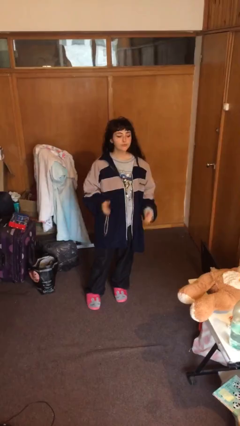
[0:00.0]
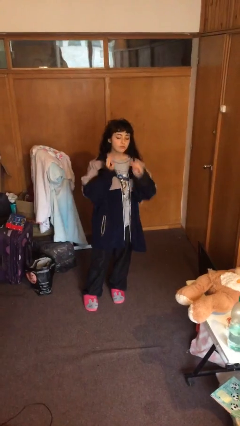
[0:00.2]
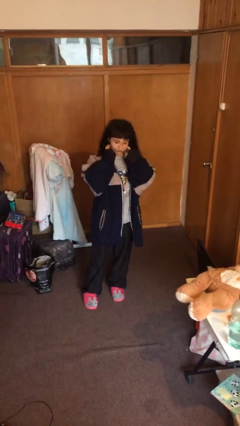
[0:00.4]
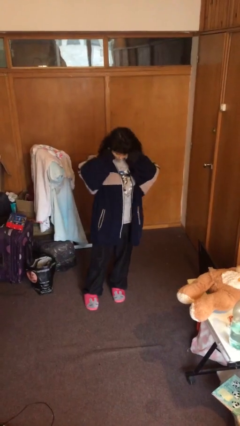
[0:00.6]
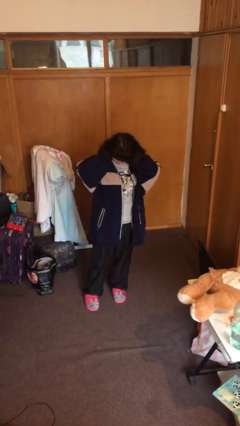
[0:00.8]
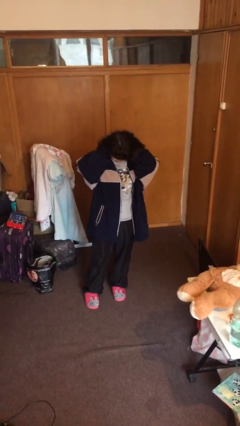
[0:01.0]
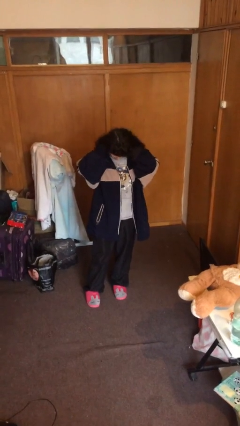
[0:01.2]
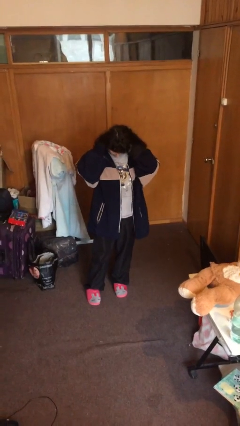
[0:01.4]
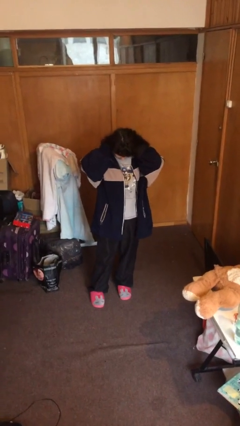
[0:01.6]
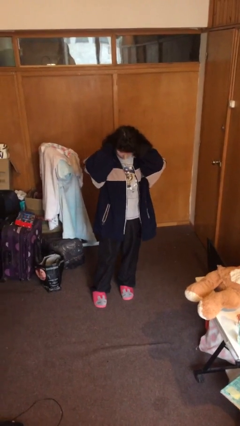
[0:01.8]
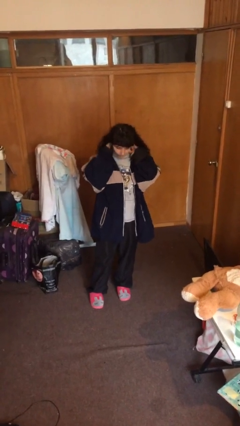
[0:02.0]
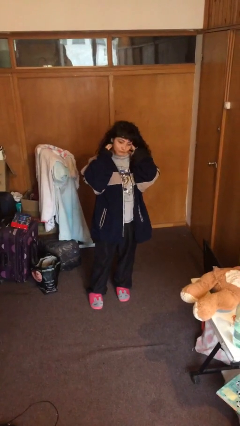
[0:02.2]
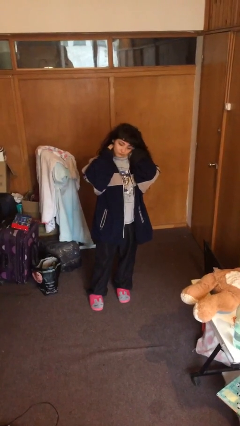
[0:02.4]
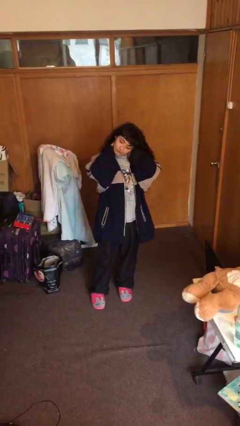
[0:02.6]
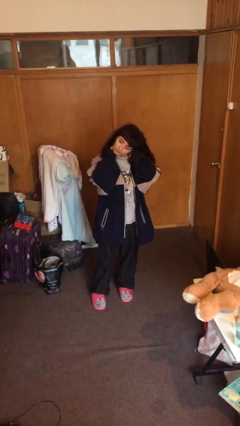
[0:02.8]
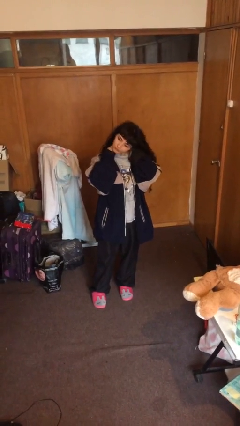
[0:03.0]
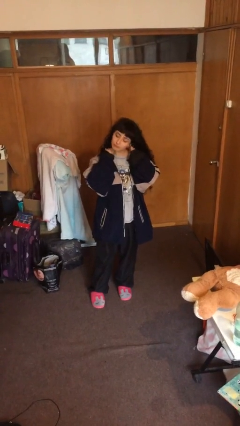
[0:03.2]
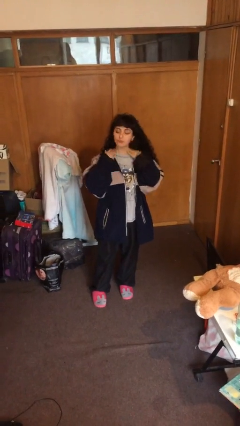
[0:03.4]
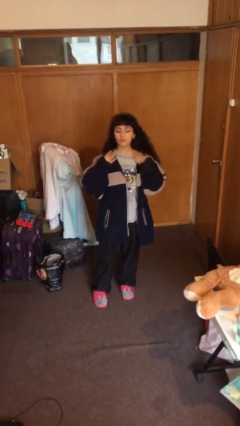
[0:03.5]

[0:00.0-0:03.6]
person rubs neck

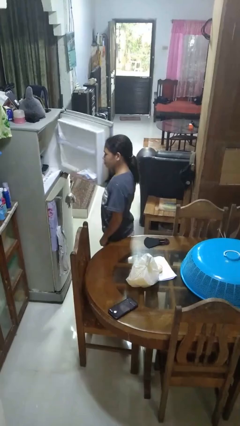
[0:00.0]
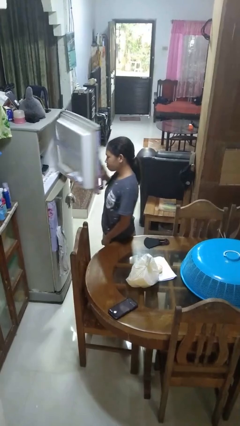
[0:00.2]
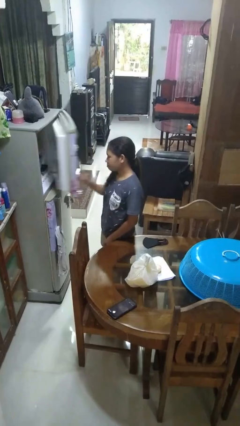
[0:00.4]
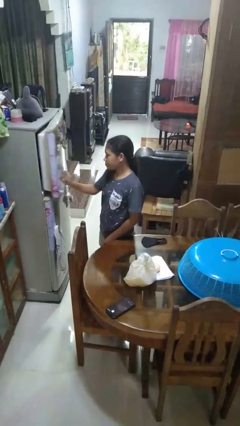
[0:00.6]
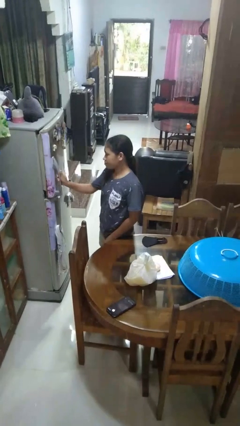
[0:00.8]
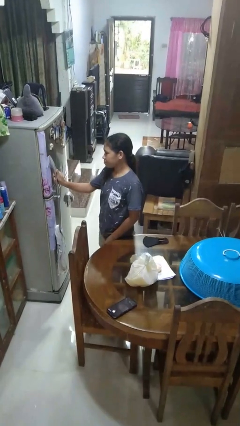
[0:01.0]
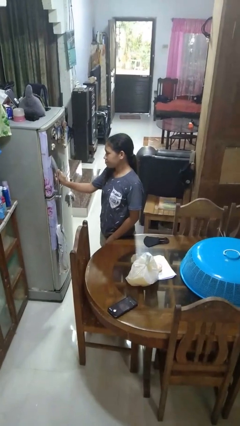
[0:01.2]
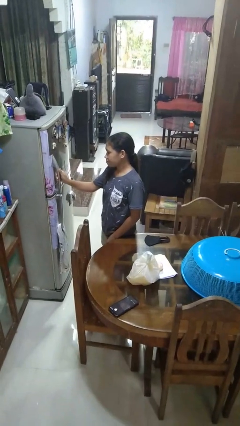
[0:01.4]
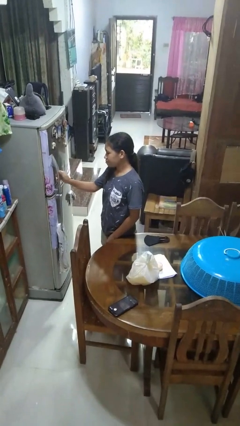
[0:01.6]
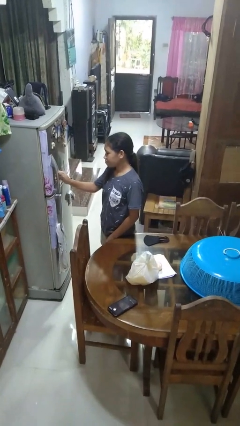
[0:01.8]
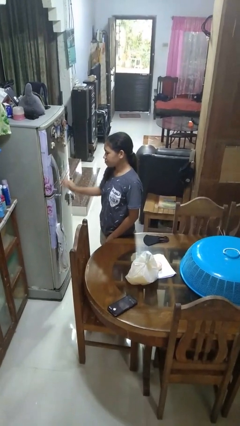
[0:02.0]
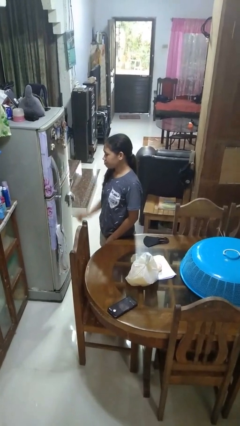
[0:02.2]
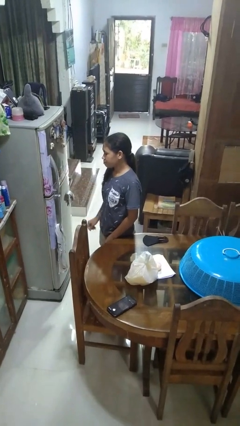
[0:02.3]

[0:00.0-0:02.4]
person closes refrigerator

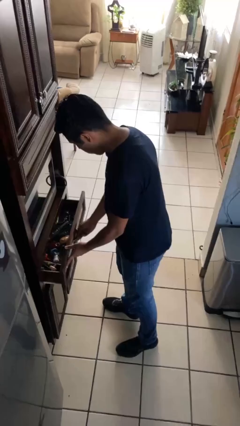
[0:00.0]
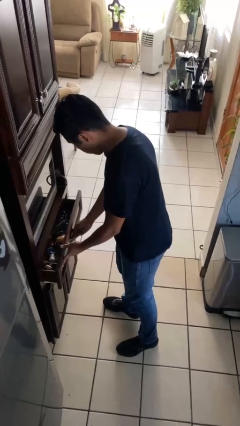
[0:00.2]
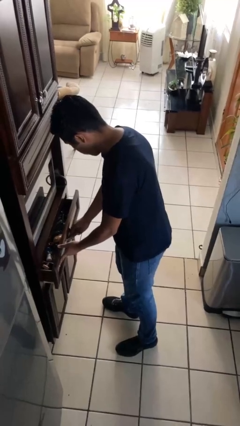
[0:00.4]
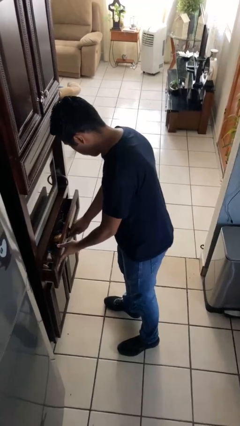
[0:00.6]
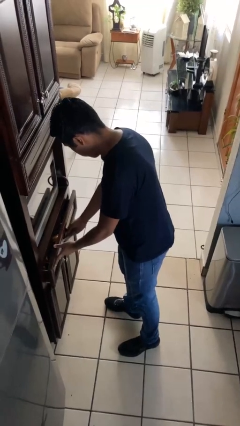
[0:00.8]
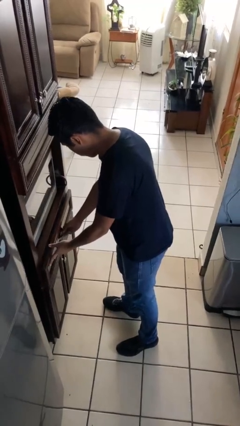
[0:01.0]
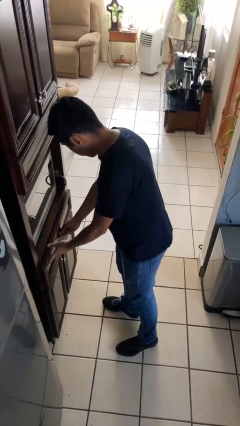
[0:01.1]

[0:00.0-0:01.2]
person closes kitchen drawer

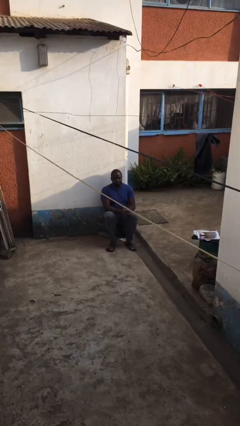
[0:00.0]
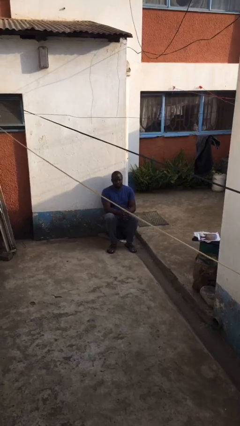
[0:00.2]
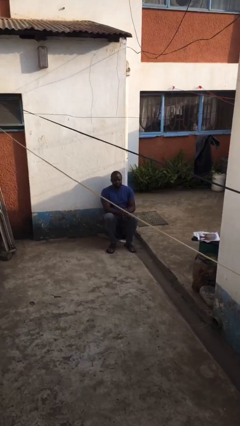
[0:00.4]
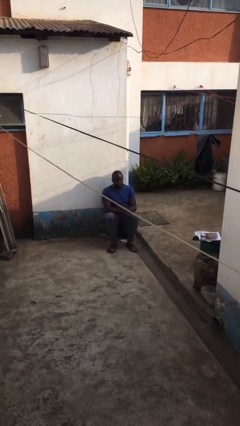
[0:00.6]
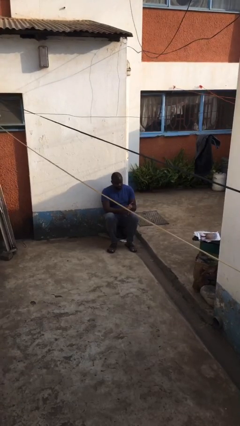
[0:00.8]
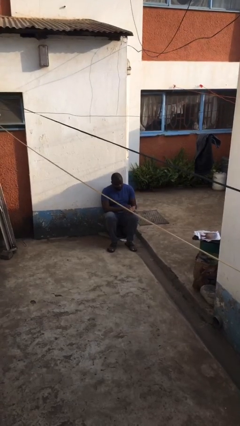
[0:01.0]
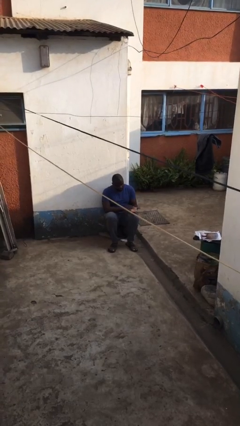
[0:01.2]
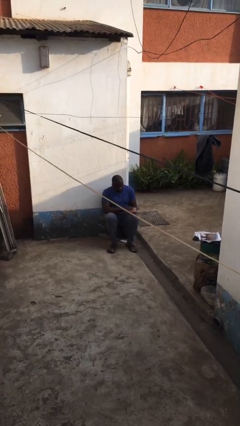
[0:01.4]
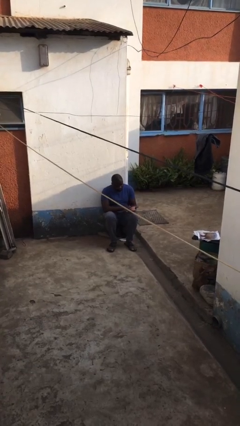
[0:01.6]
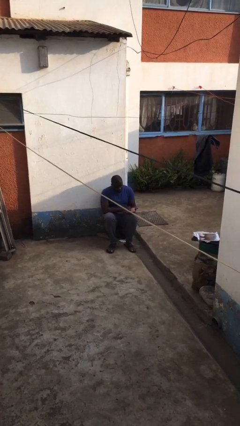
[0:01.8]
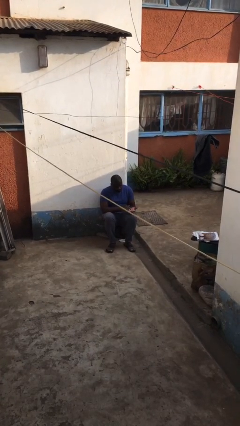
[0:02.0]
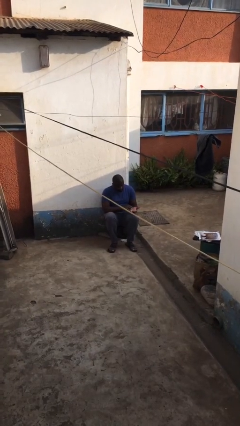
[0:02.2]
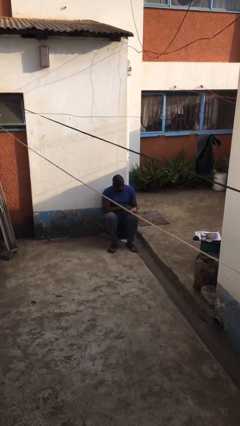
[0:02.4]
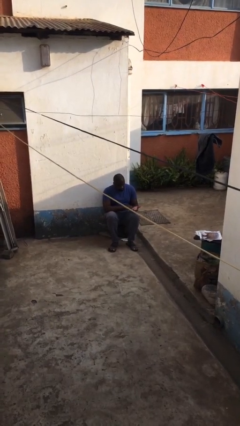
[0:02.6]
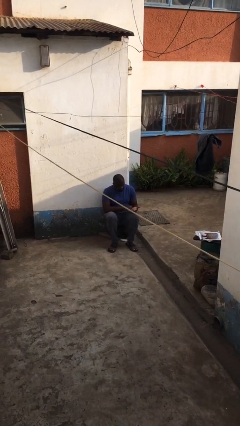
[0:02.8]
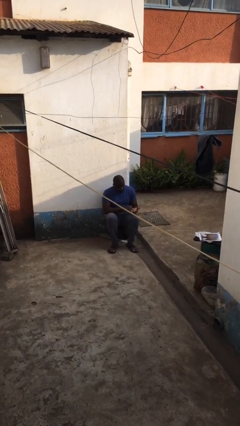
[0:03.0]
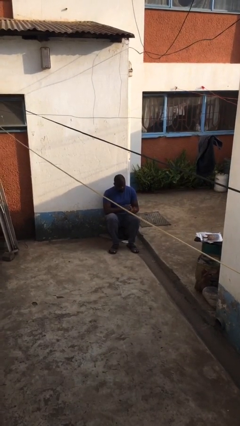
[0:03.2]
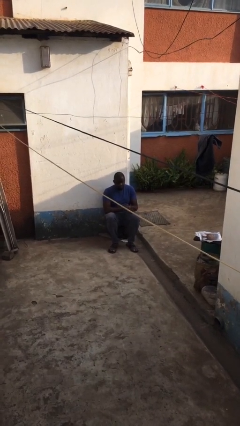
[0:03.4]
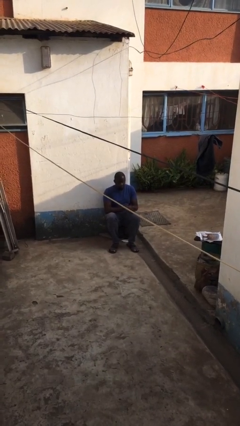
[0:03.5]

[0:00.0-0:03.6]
person looks at hands in lap

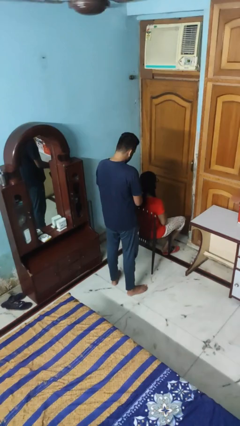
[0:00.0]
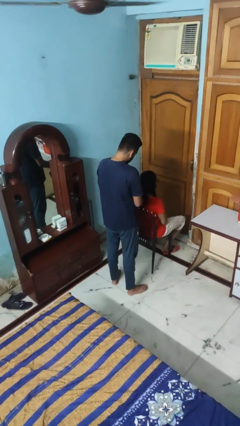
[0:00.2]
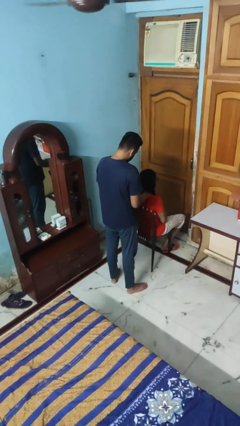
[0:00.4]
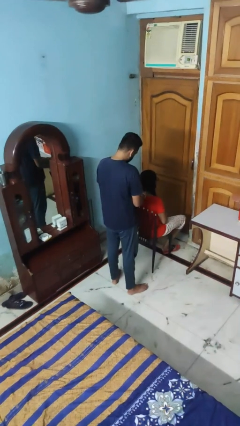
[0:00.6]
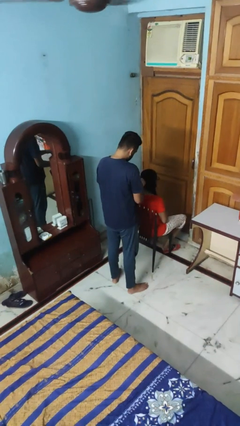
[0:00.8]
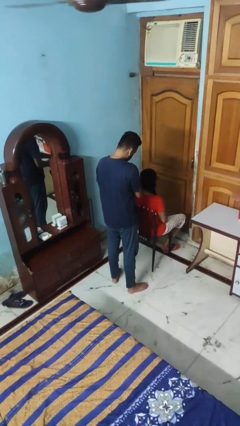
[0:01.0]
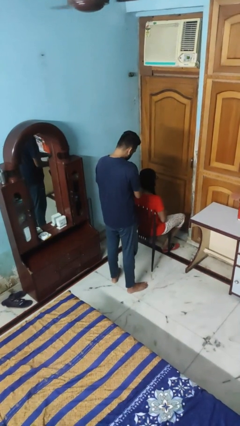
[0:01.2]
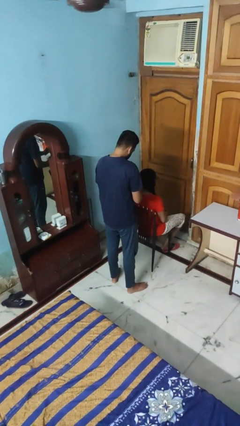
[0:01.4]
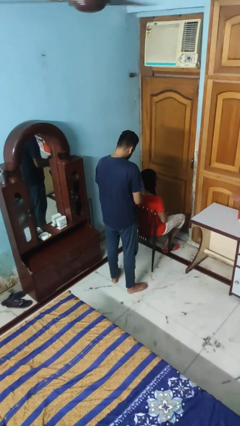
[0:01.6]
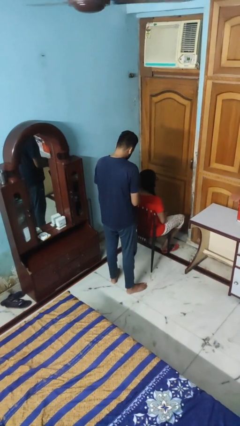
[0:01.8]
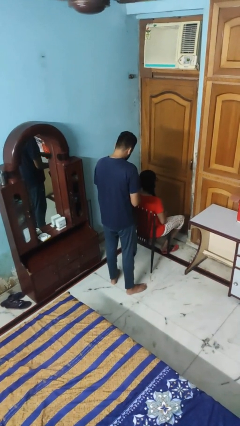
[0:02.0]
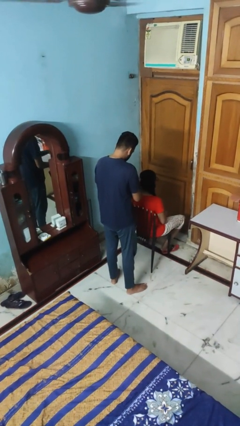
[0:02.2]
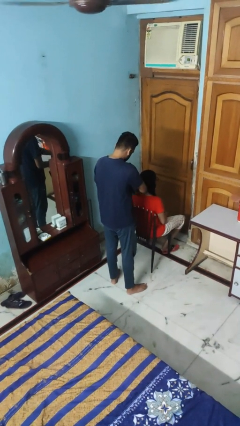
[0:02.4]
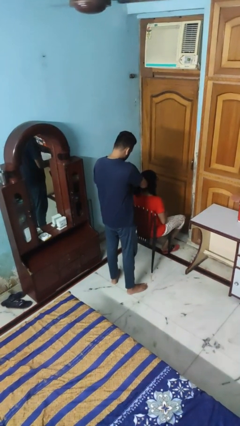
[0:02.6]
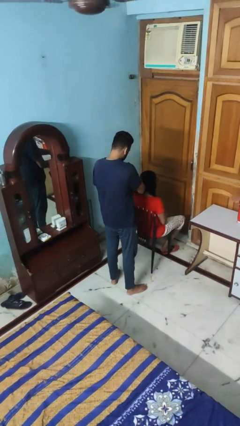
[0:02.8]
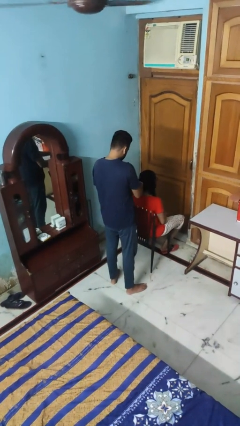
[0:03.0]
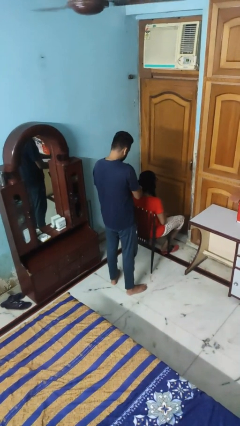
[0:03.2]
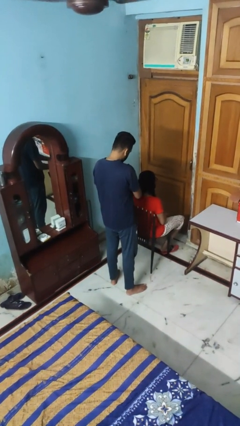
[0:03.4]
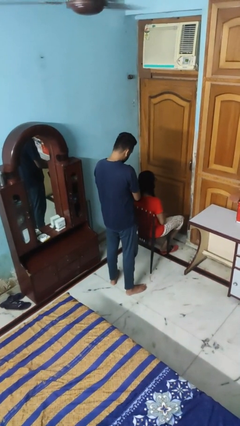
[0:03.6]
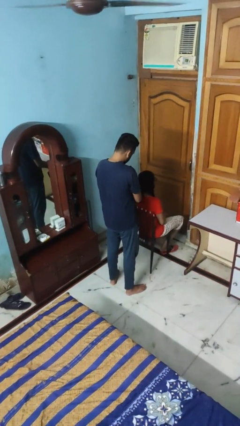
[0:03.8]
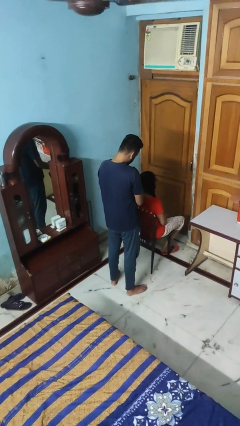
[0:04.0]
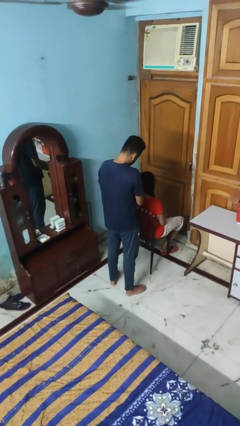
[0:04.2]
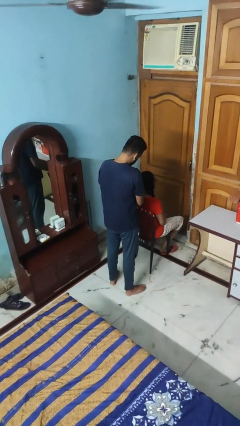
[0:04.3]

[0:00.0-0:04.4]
person braids hair of person

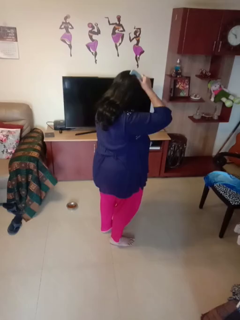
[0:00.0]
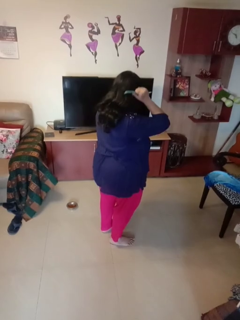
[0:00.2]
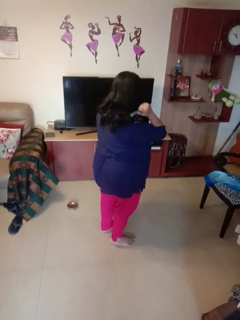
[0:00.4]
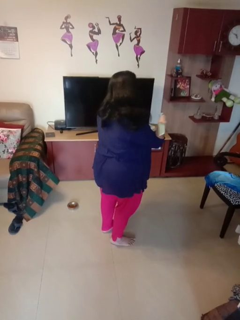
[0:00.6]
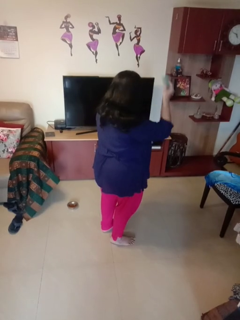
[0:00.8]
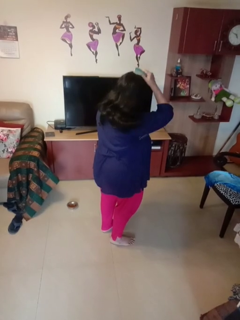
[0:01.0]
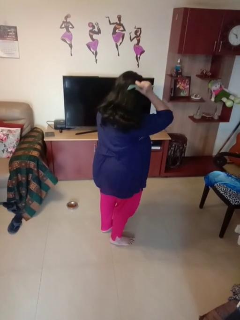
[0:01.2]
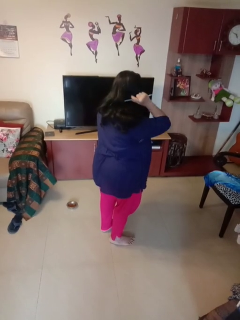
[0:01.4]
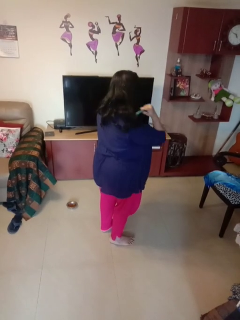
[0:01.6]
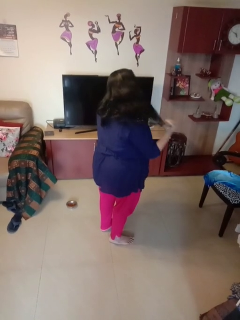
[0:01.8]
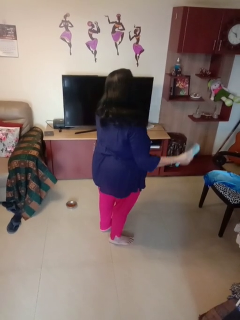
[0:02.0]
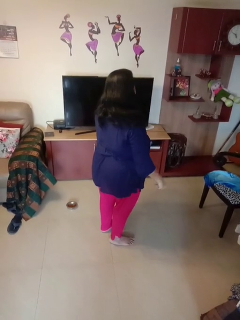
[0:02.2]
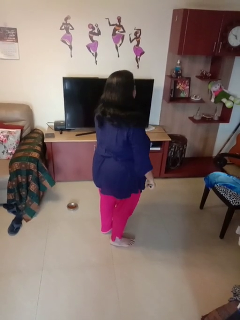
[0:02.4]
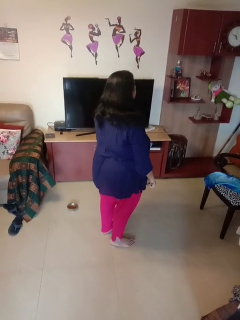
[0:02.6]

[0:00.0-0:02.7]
person brushes hair
